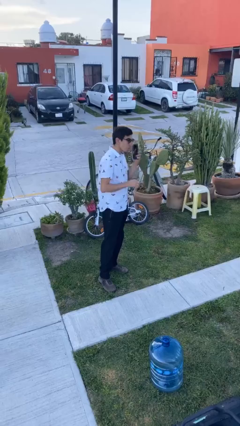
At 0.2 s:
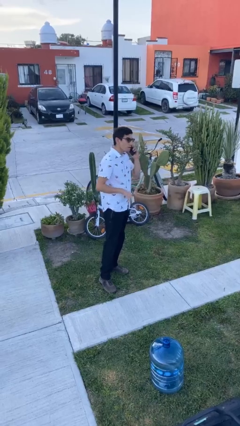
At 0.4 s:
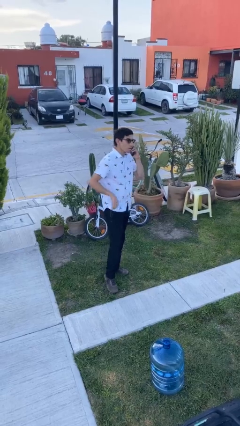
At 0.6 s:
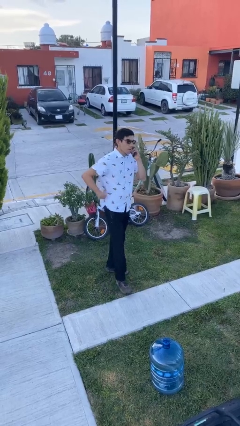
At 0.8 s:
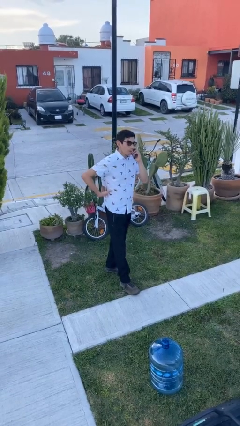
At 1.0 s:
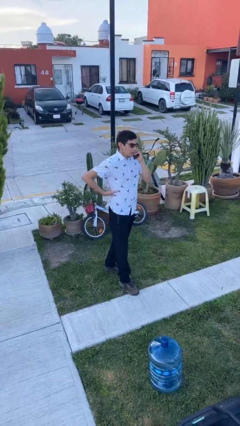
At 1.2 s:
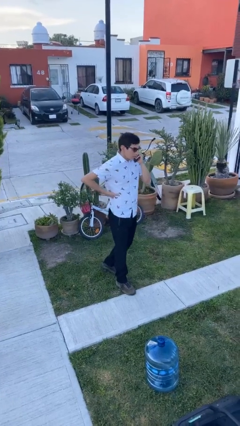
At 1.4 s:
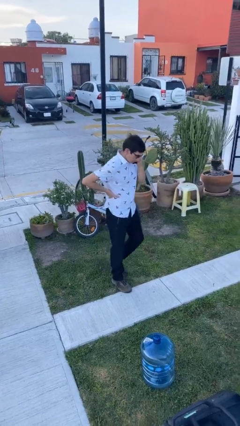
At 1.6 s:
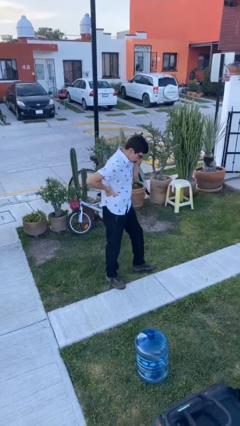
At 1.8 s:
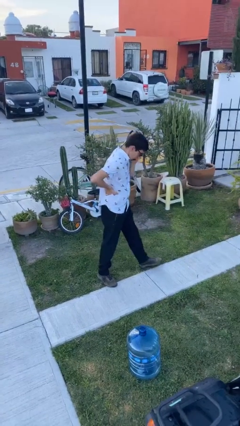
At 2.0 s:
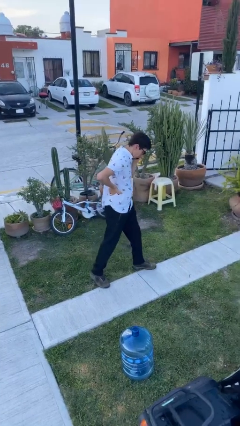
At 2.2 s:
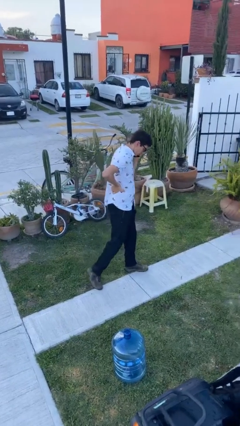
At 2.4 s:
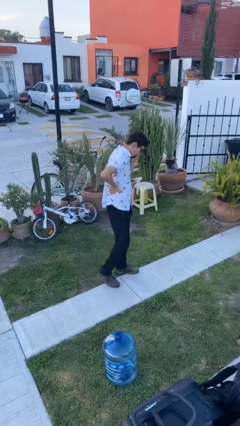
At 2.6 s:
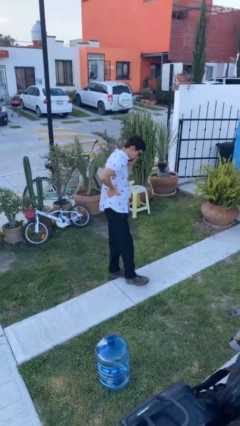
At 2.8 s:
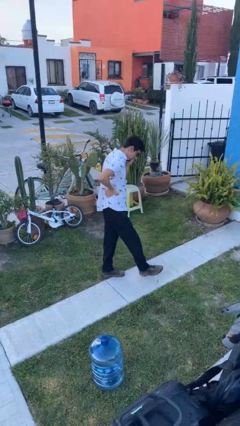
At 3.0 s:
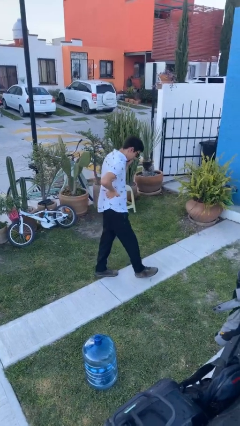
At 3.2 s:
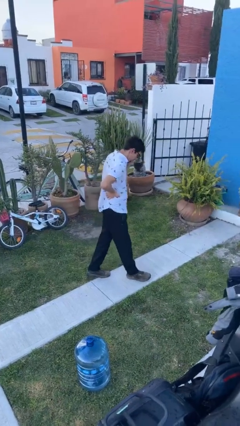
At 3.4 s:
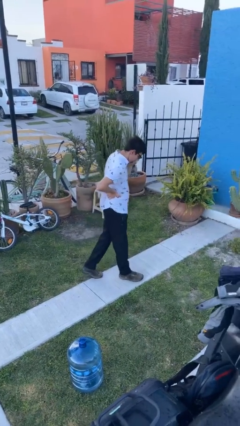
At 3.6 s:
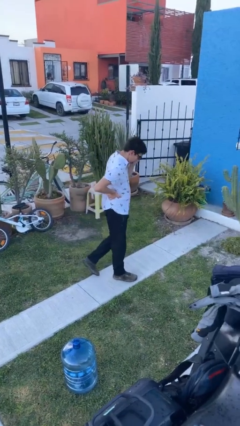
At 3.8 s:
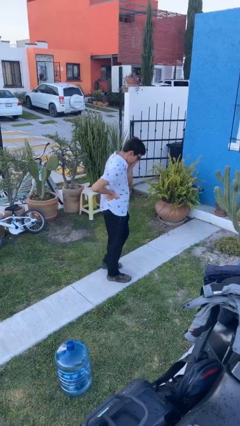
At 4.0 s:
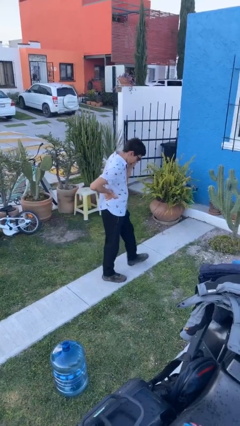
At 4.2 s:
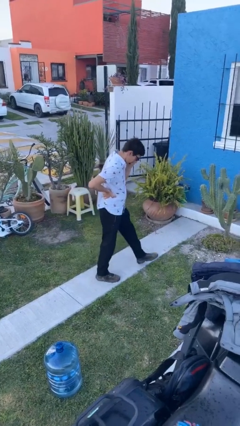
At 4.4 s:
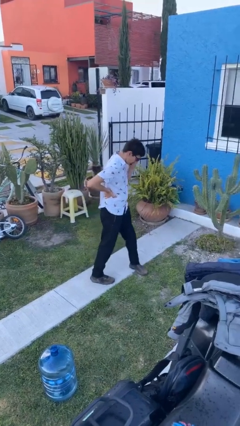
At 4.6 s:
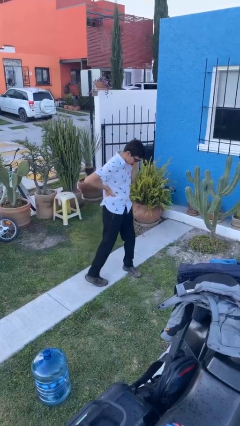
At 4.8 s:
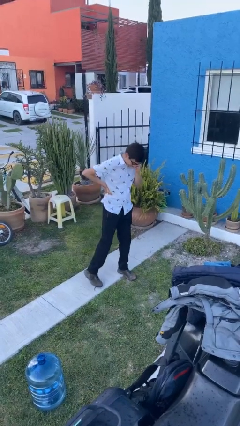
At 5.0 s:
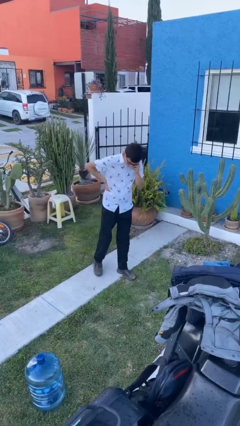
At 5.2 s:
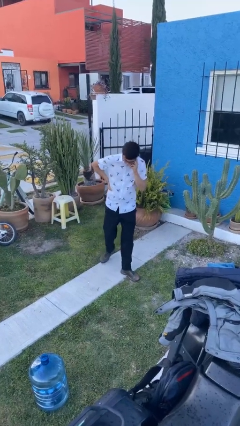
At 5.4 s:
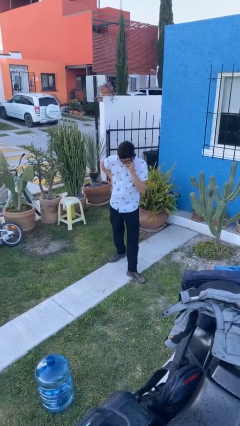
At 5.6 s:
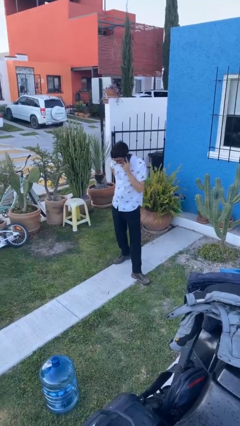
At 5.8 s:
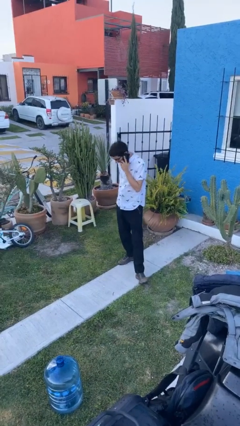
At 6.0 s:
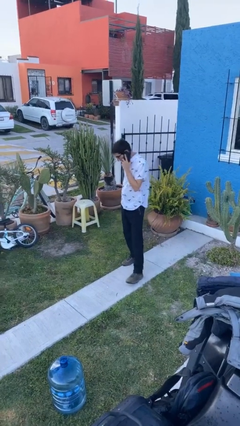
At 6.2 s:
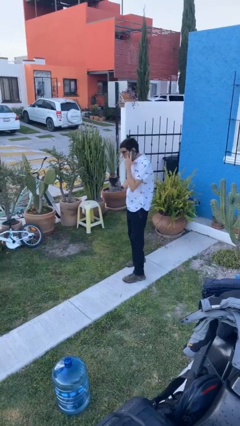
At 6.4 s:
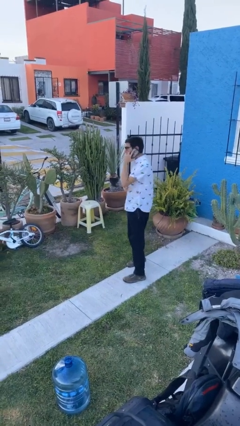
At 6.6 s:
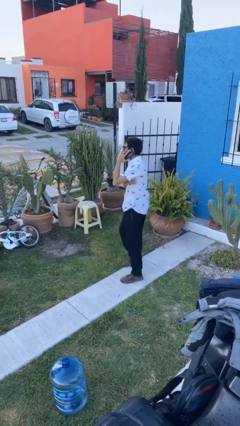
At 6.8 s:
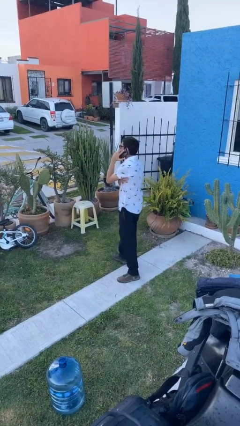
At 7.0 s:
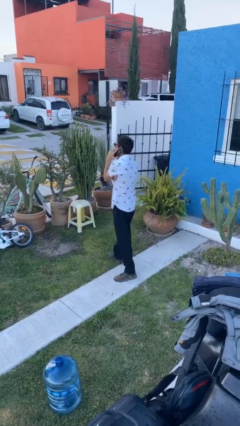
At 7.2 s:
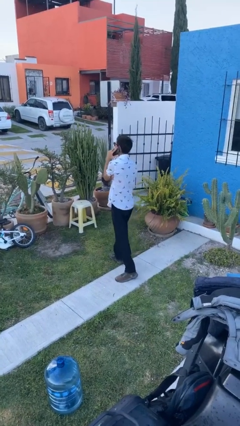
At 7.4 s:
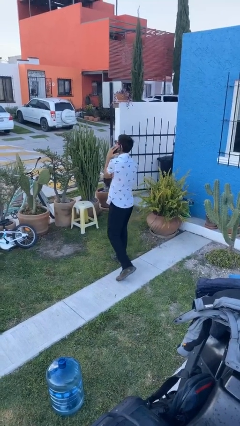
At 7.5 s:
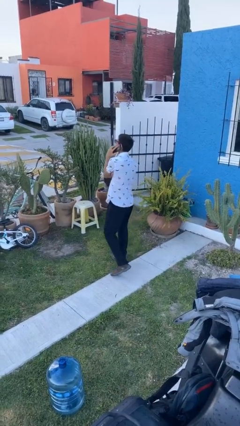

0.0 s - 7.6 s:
person talks on phone

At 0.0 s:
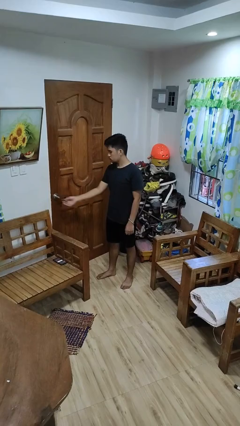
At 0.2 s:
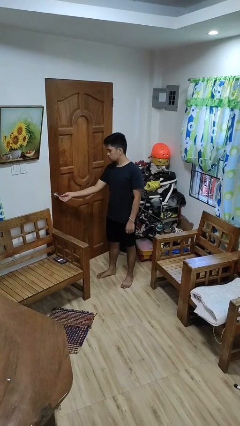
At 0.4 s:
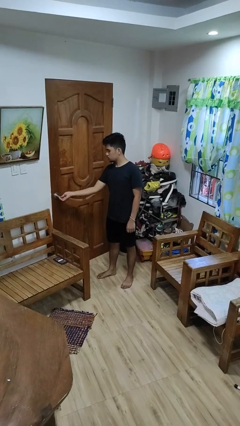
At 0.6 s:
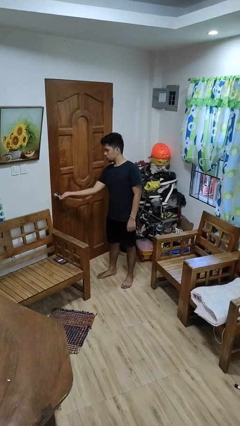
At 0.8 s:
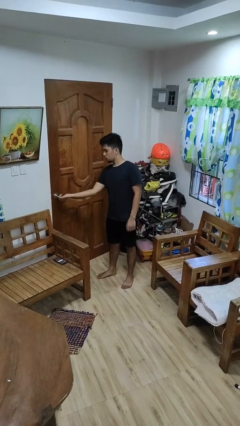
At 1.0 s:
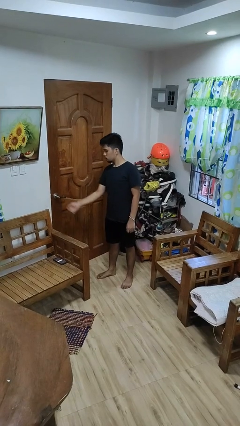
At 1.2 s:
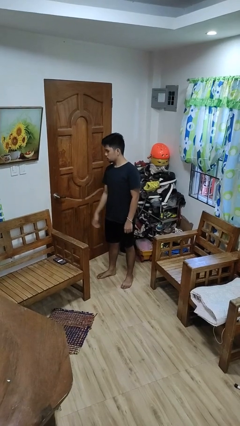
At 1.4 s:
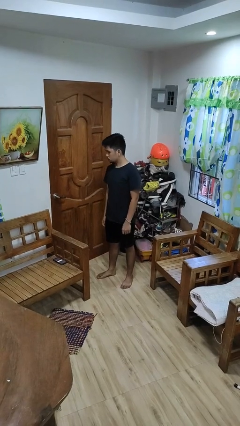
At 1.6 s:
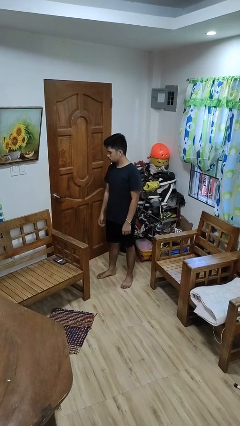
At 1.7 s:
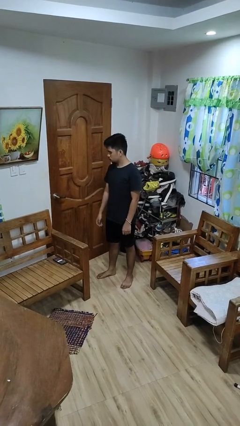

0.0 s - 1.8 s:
person unlocks door with keys

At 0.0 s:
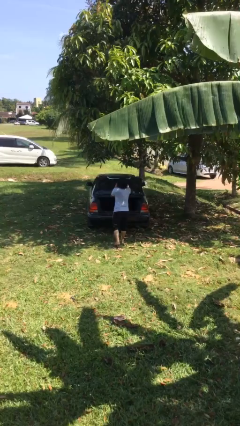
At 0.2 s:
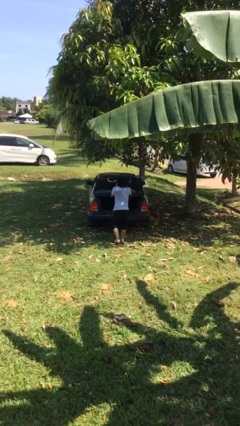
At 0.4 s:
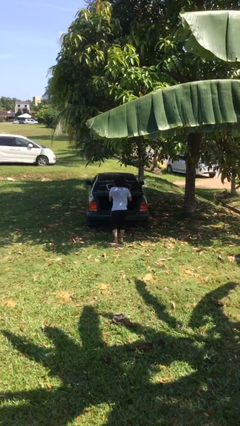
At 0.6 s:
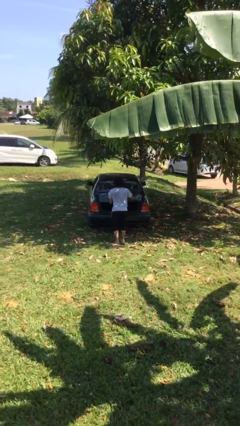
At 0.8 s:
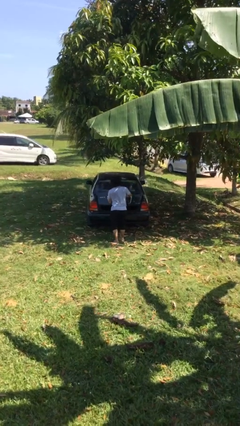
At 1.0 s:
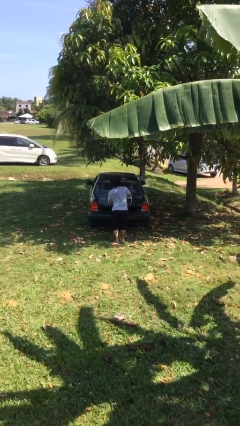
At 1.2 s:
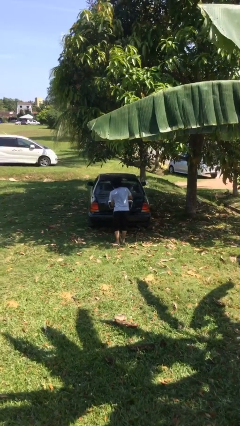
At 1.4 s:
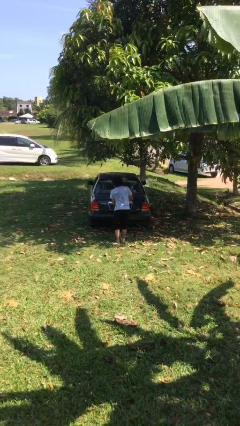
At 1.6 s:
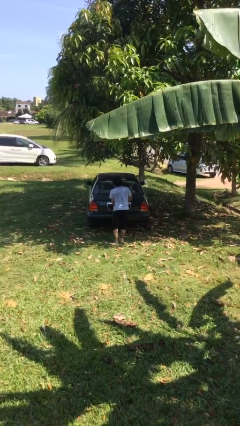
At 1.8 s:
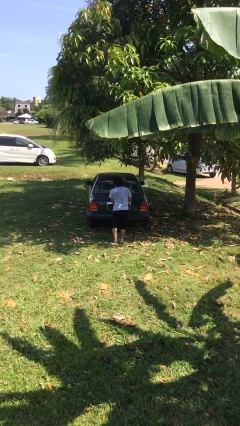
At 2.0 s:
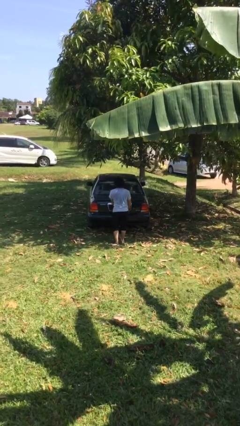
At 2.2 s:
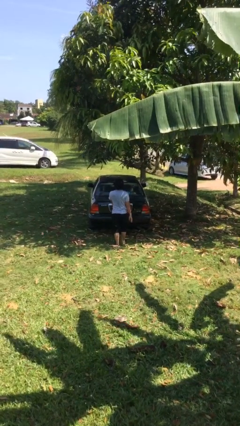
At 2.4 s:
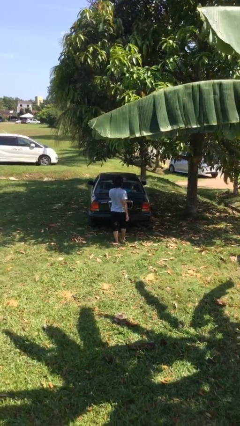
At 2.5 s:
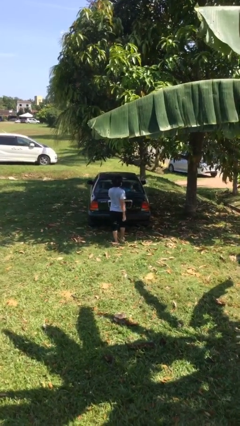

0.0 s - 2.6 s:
person closes car trunk

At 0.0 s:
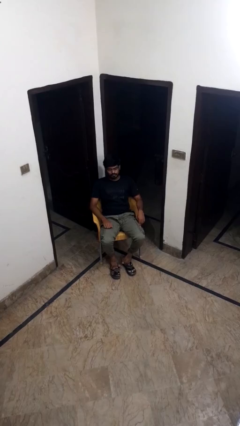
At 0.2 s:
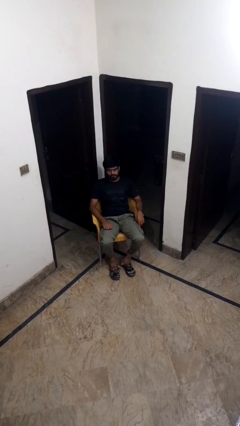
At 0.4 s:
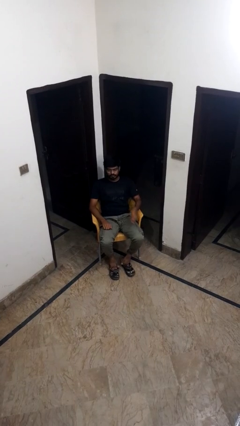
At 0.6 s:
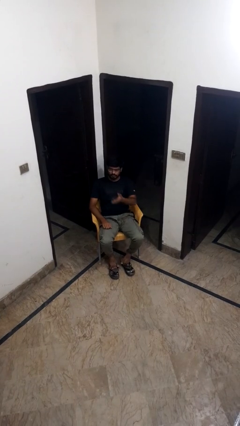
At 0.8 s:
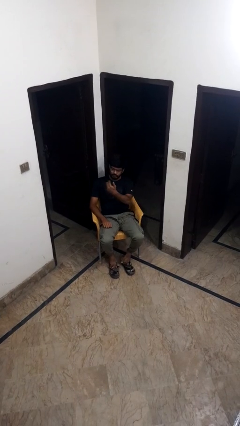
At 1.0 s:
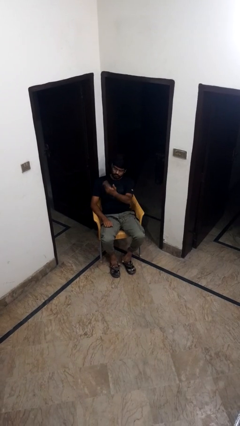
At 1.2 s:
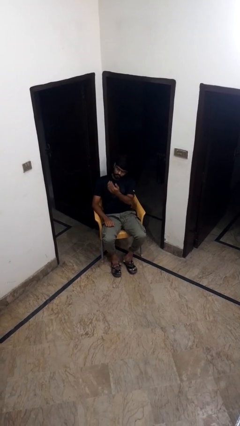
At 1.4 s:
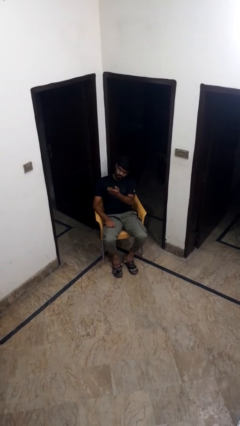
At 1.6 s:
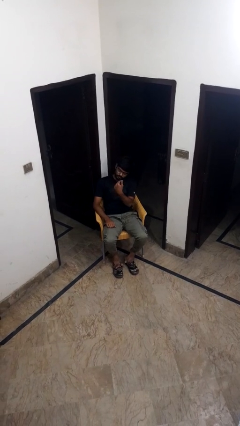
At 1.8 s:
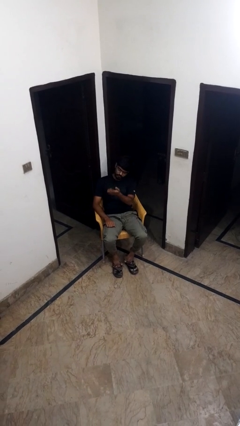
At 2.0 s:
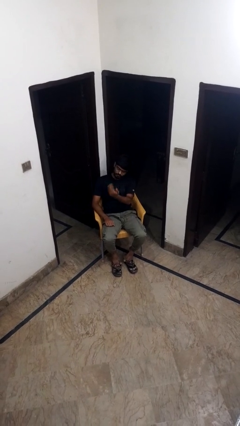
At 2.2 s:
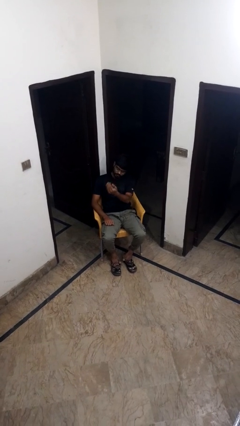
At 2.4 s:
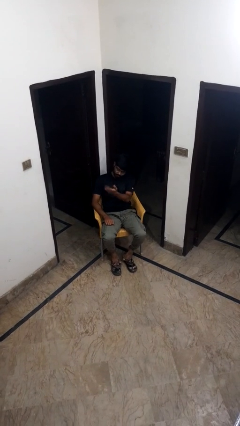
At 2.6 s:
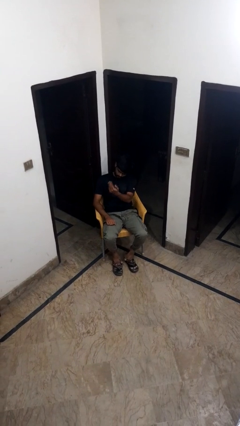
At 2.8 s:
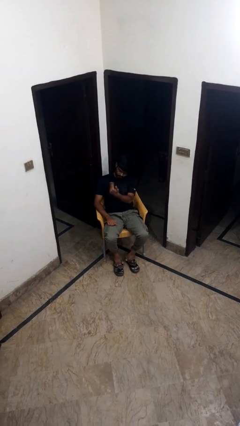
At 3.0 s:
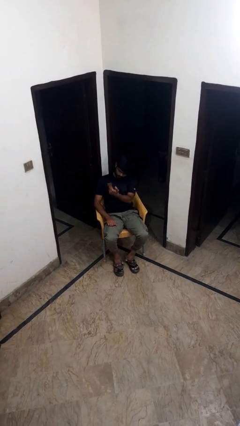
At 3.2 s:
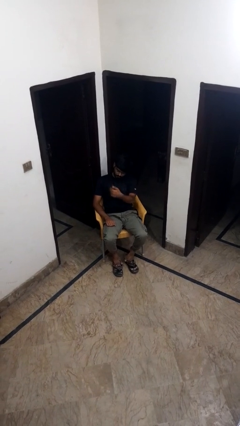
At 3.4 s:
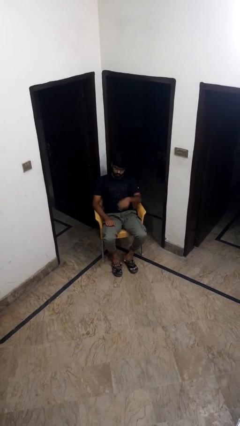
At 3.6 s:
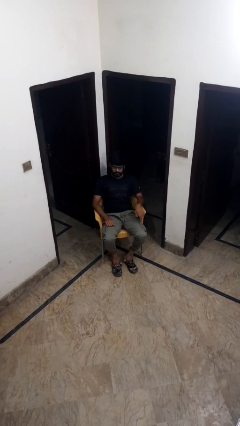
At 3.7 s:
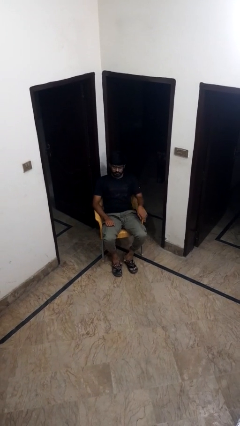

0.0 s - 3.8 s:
person gestures come here

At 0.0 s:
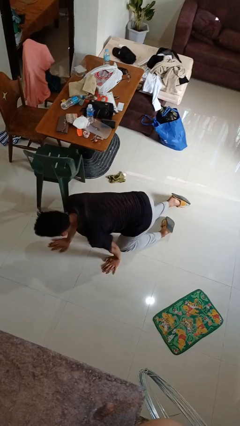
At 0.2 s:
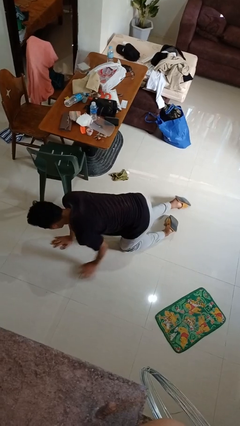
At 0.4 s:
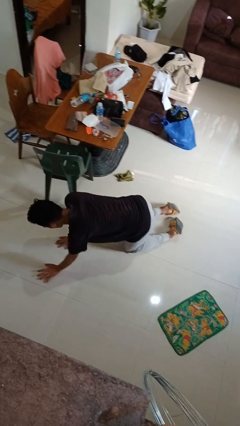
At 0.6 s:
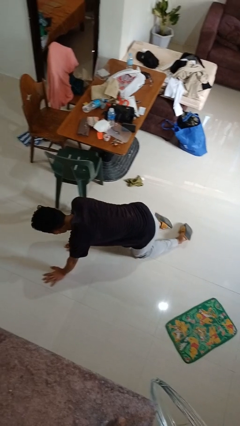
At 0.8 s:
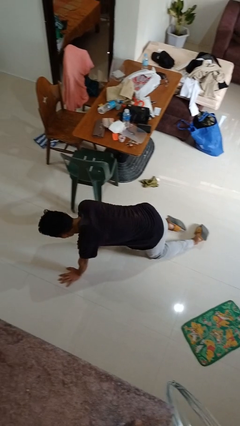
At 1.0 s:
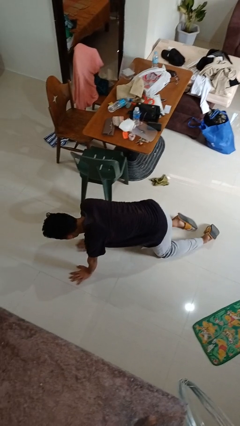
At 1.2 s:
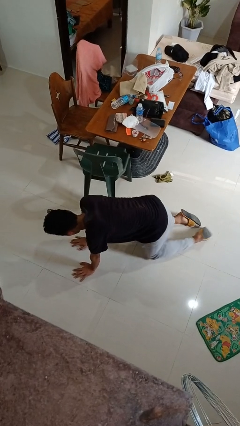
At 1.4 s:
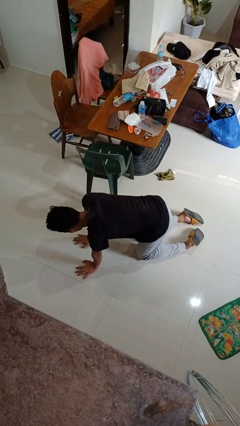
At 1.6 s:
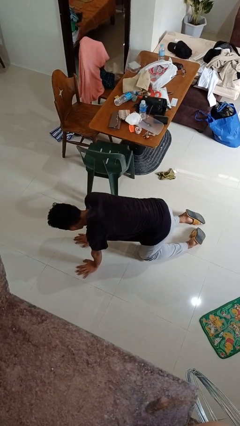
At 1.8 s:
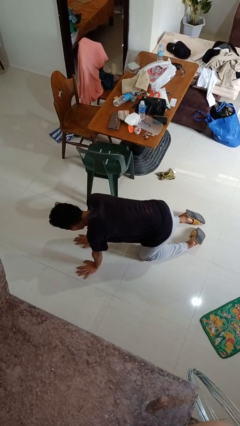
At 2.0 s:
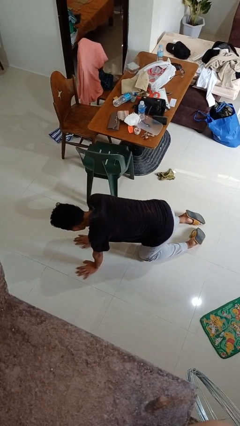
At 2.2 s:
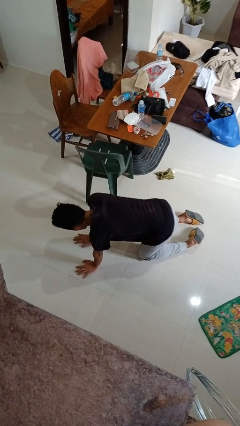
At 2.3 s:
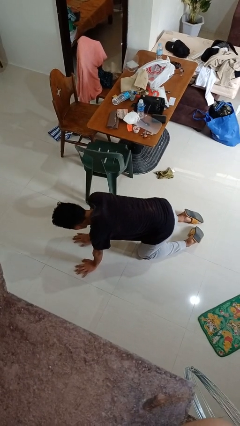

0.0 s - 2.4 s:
person crawls
